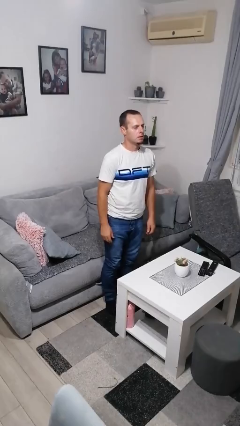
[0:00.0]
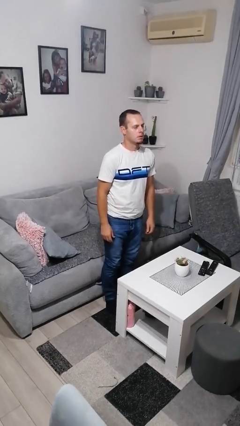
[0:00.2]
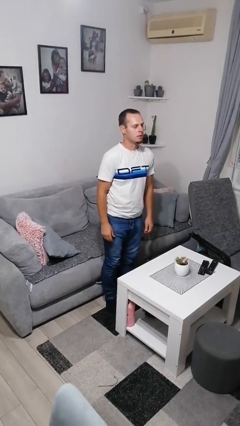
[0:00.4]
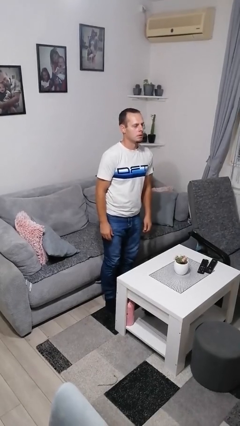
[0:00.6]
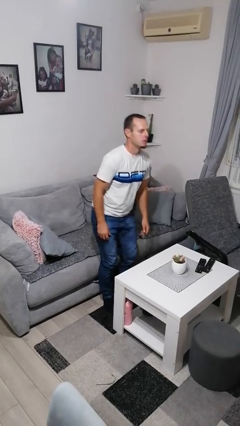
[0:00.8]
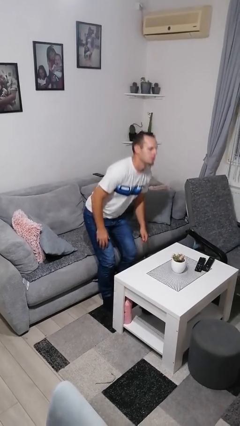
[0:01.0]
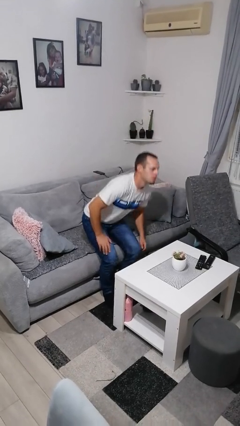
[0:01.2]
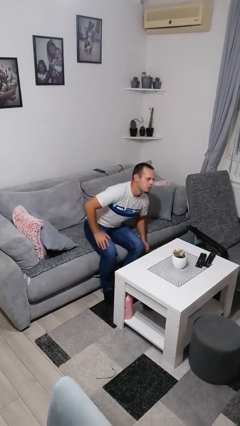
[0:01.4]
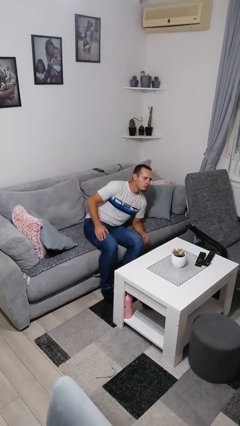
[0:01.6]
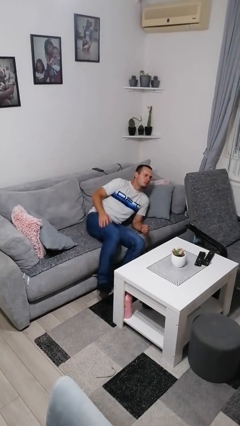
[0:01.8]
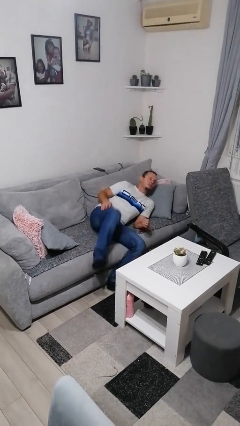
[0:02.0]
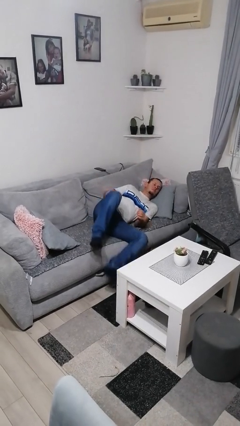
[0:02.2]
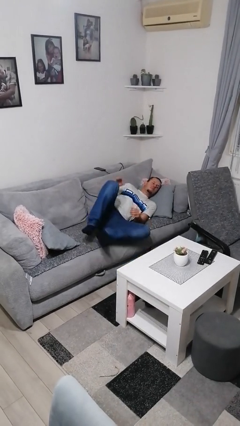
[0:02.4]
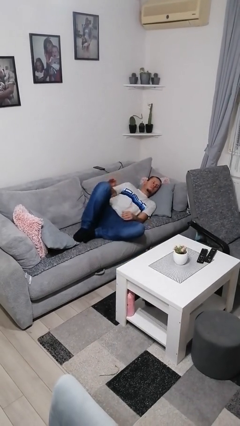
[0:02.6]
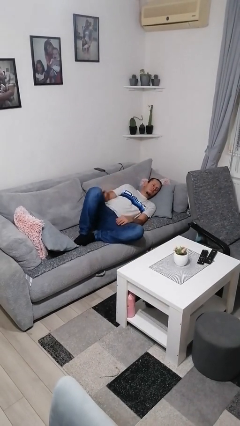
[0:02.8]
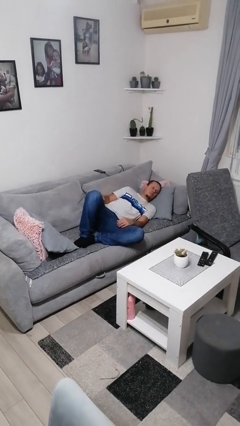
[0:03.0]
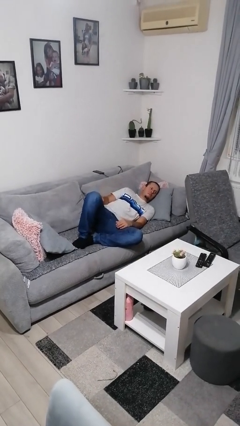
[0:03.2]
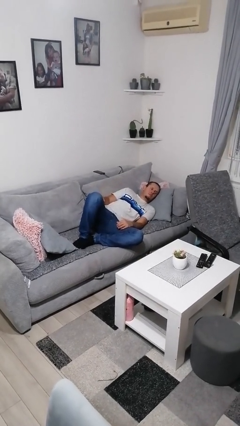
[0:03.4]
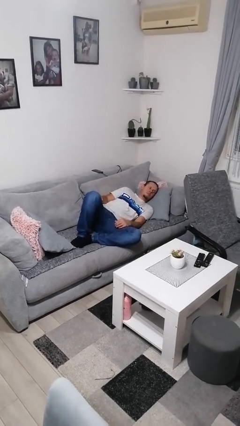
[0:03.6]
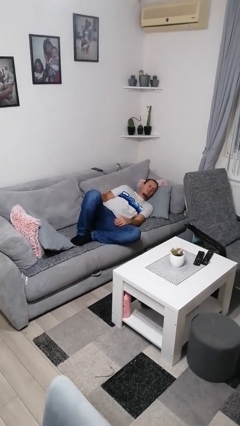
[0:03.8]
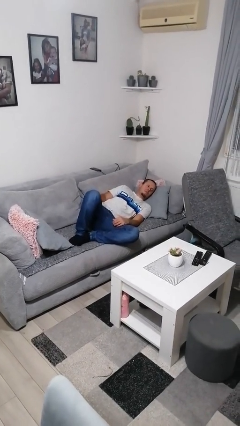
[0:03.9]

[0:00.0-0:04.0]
person lies down on couch

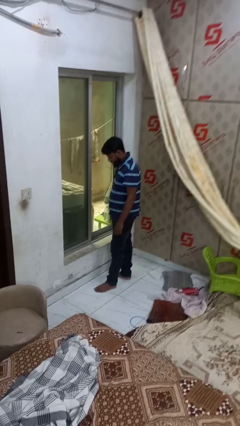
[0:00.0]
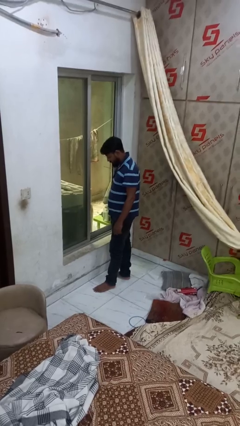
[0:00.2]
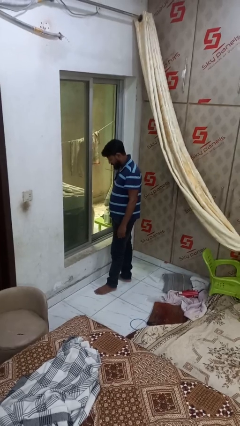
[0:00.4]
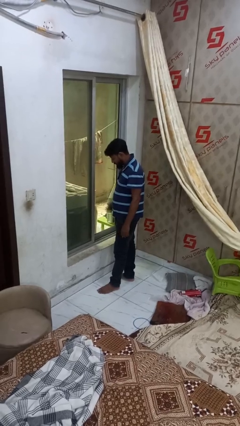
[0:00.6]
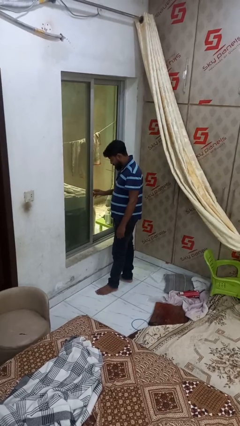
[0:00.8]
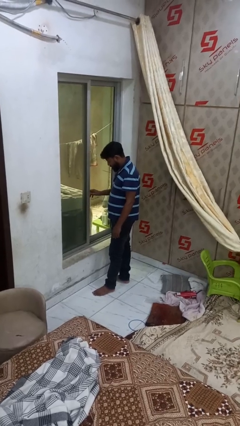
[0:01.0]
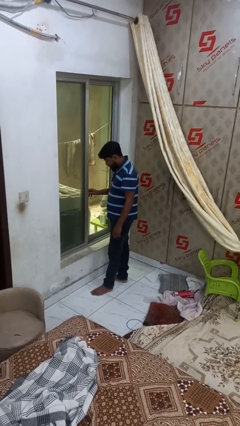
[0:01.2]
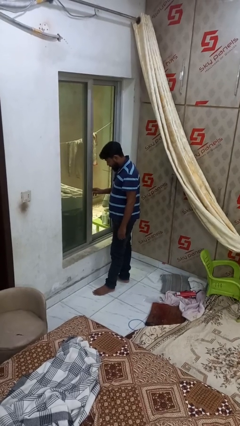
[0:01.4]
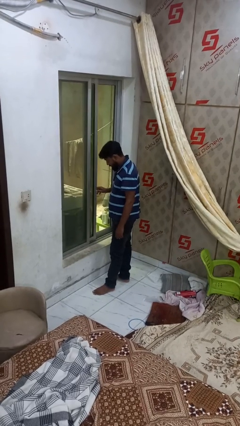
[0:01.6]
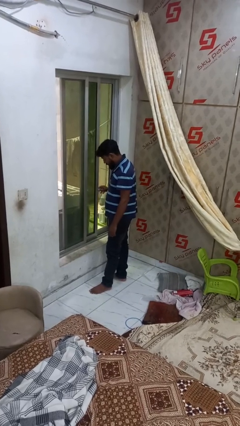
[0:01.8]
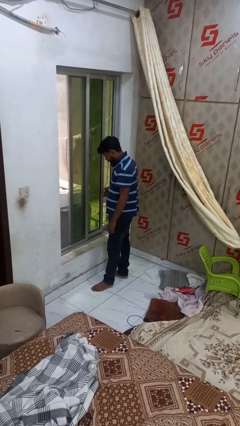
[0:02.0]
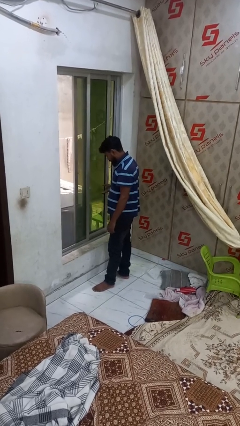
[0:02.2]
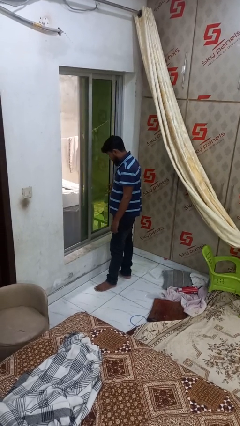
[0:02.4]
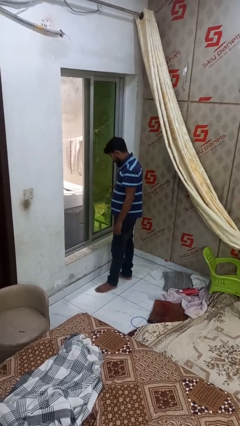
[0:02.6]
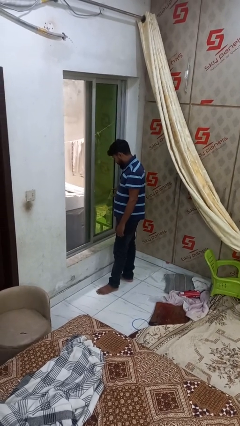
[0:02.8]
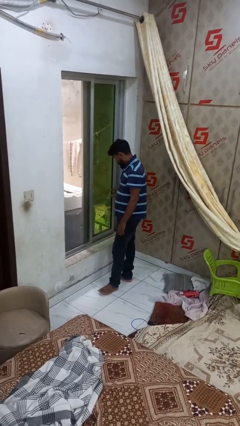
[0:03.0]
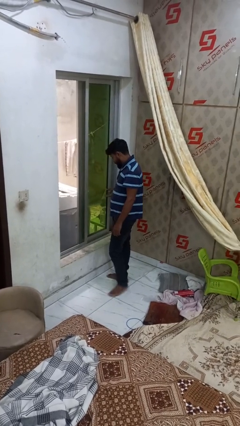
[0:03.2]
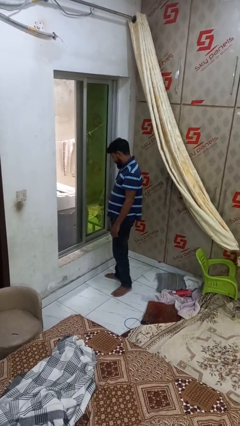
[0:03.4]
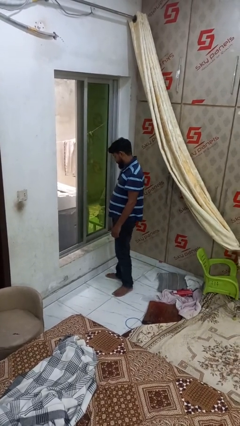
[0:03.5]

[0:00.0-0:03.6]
person opens sliding door

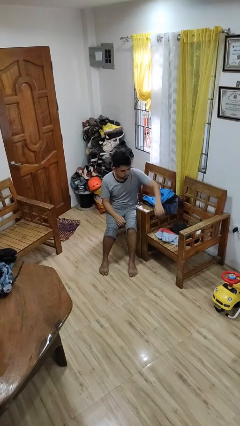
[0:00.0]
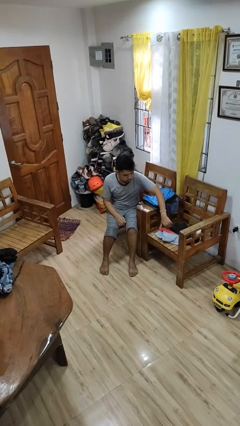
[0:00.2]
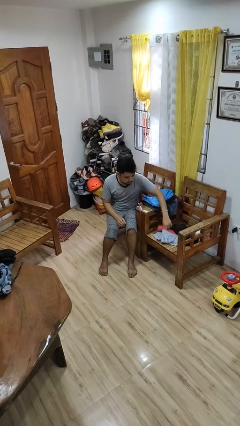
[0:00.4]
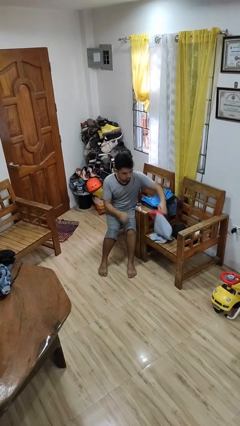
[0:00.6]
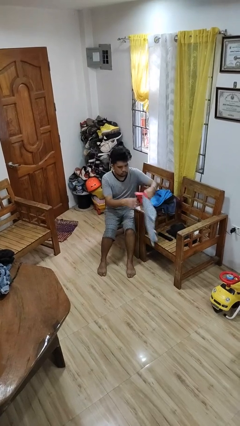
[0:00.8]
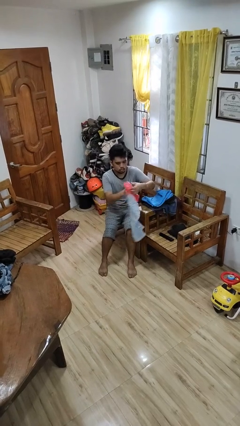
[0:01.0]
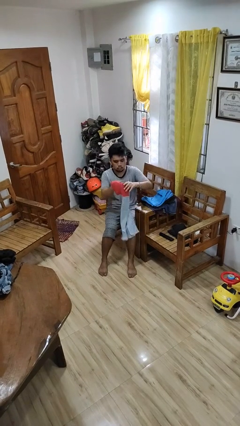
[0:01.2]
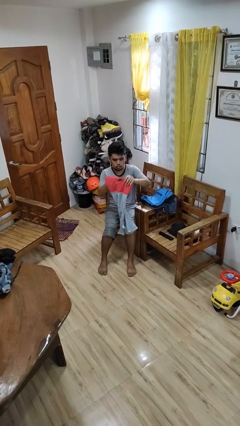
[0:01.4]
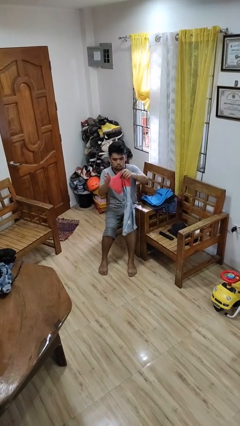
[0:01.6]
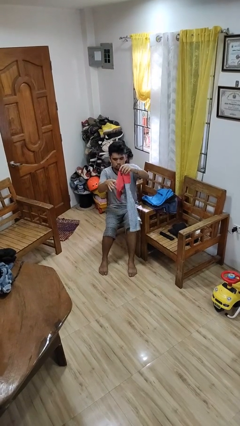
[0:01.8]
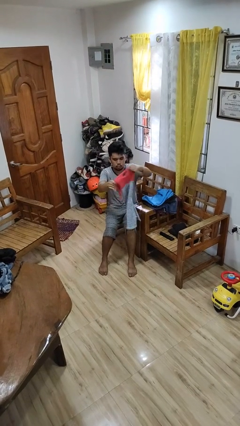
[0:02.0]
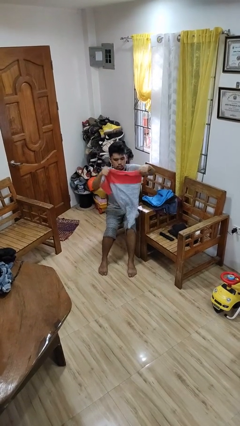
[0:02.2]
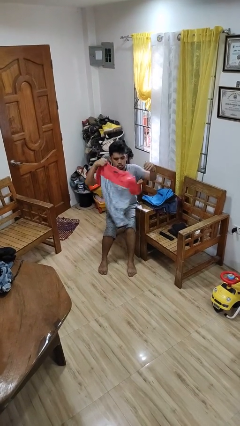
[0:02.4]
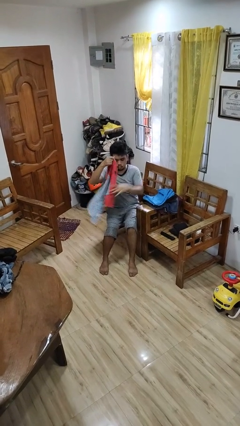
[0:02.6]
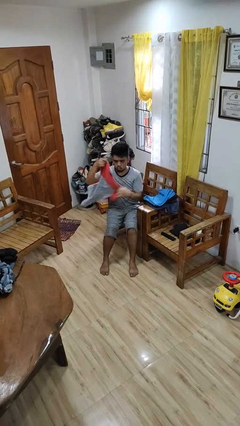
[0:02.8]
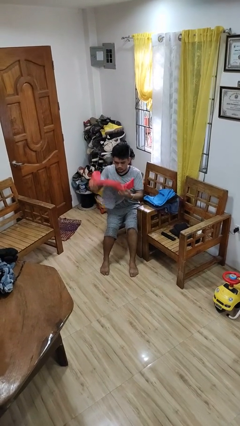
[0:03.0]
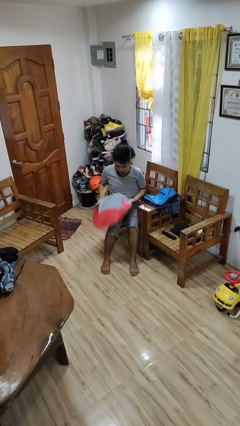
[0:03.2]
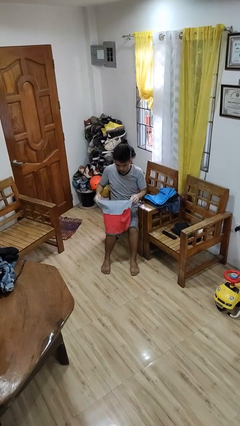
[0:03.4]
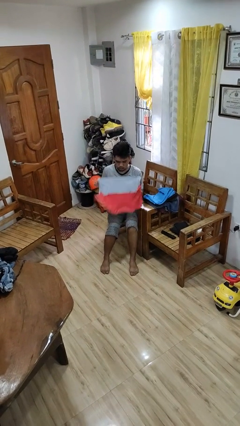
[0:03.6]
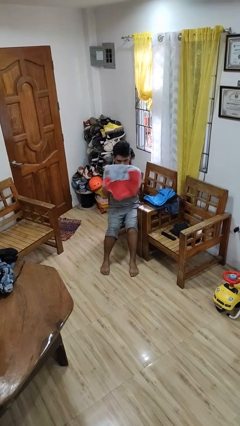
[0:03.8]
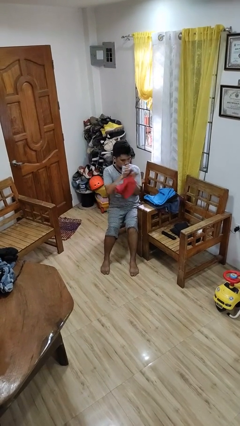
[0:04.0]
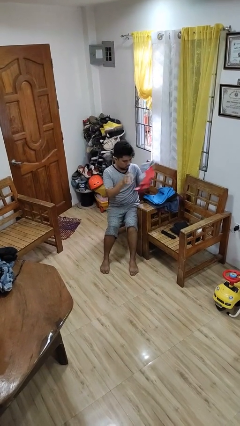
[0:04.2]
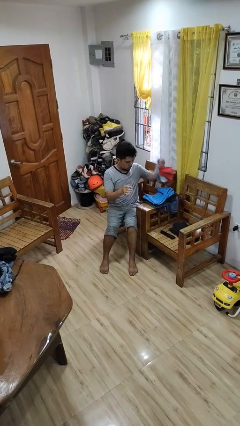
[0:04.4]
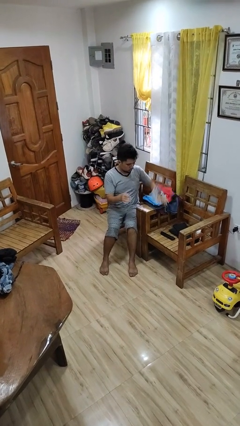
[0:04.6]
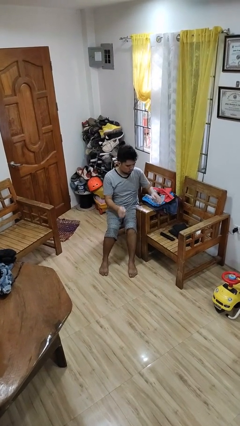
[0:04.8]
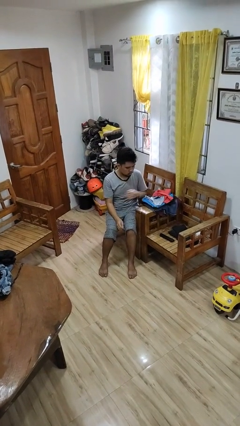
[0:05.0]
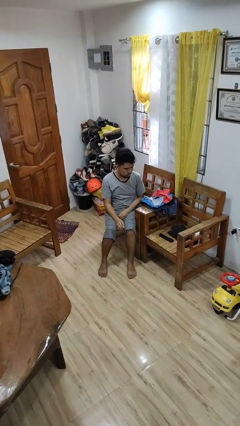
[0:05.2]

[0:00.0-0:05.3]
person folds shirt

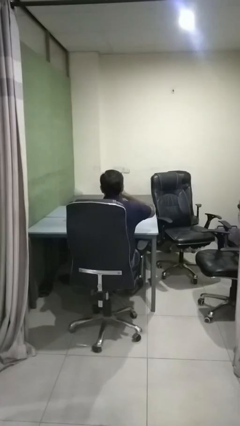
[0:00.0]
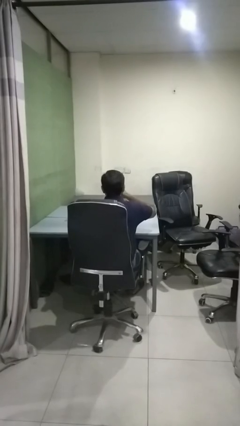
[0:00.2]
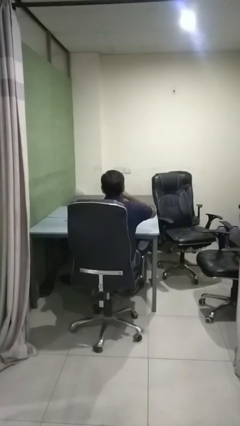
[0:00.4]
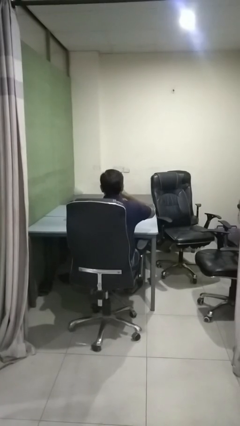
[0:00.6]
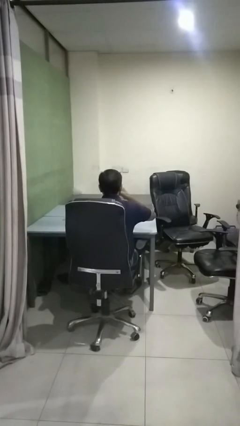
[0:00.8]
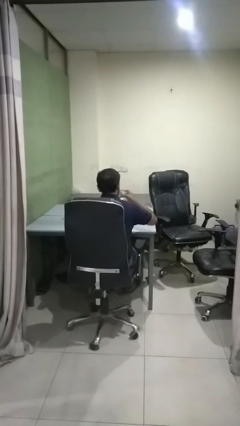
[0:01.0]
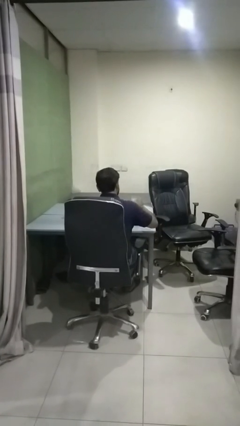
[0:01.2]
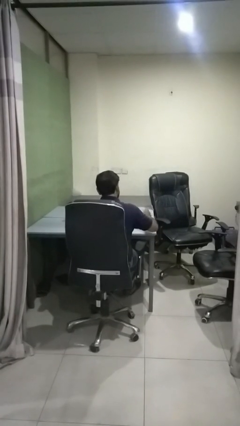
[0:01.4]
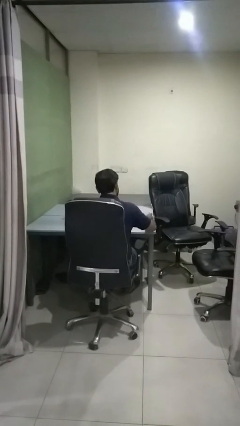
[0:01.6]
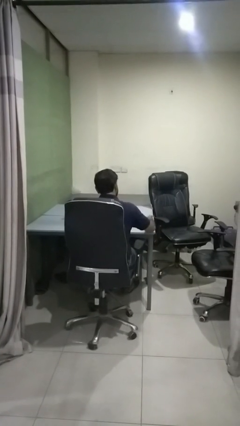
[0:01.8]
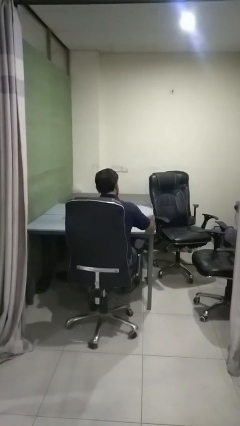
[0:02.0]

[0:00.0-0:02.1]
person puts down object on table

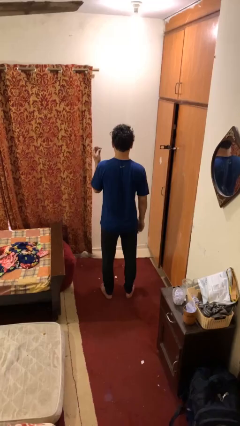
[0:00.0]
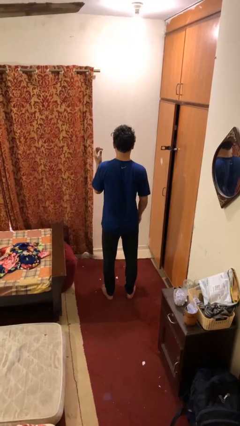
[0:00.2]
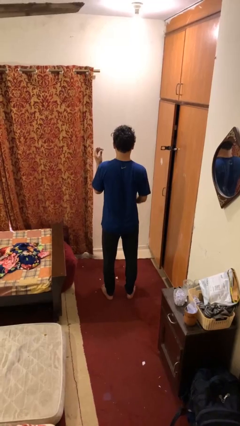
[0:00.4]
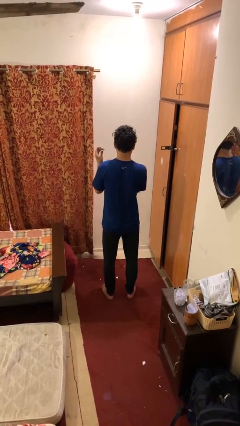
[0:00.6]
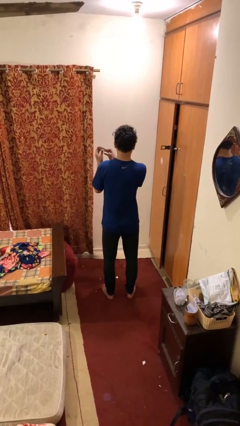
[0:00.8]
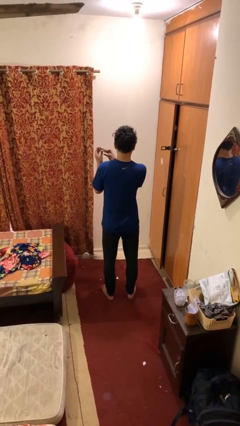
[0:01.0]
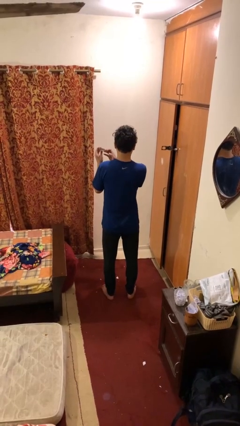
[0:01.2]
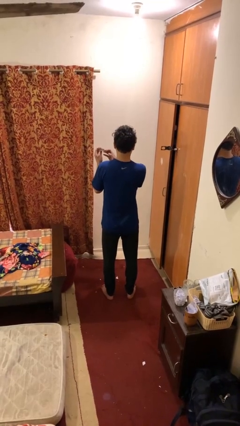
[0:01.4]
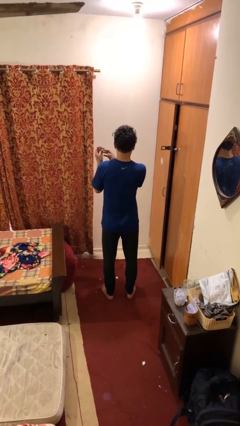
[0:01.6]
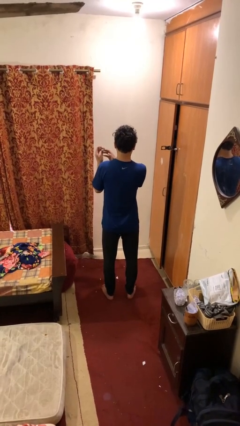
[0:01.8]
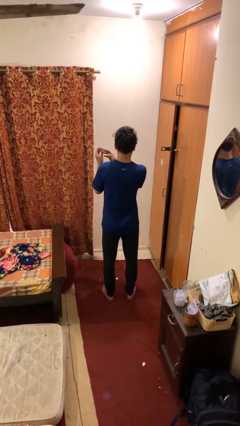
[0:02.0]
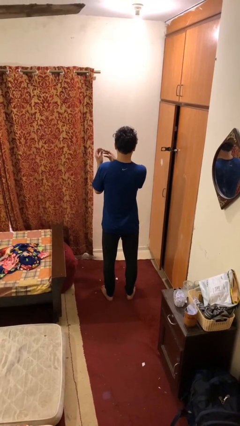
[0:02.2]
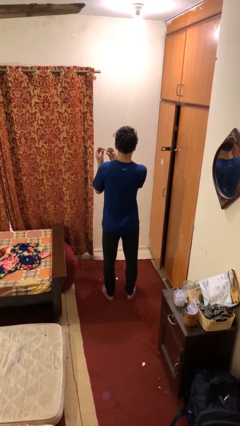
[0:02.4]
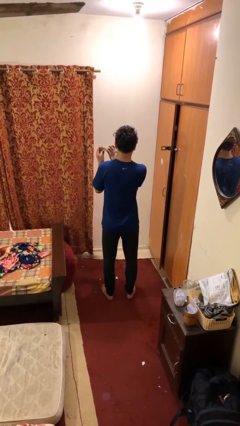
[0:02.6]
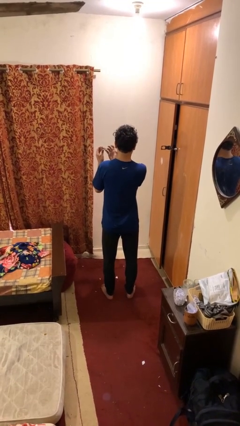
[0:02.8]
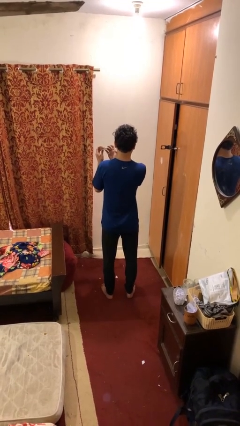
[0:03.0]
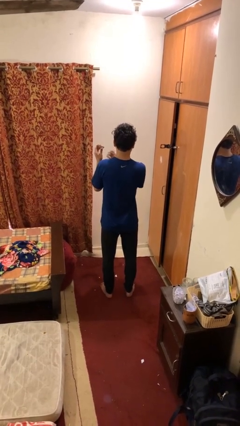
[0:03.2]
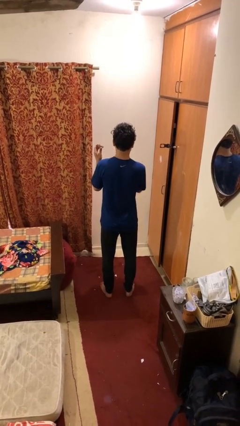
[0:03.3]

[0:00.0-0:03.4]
person clips fingernails
